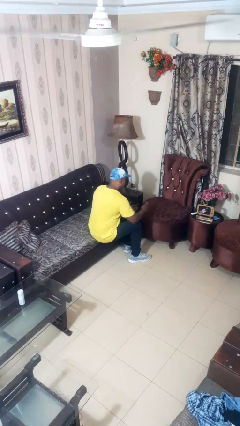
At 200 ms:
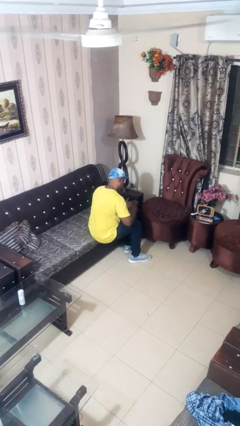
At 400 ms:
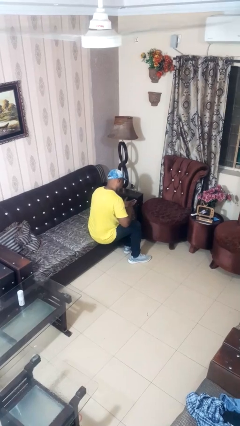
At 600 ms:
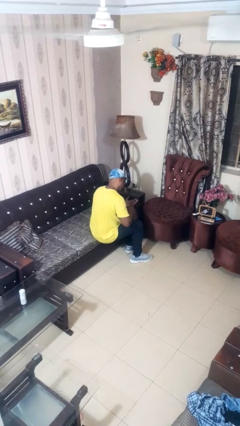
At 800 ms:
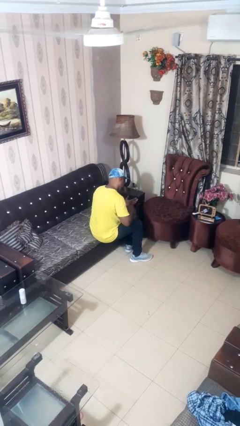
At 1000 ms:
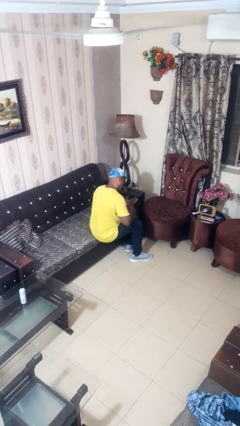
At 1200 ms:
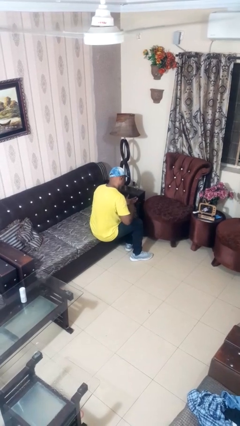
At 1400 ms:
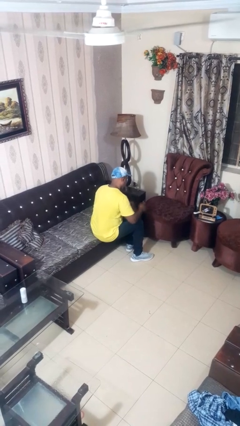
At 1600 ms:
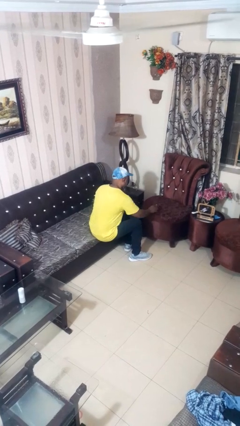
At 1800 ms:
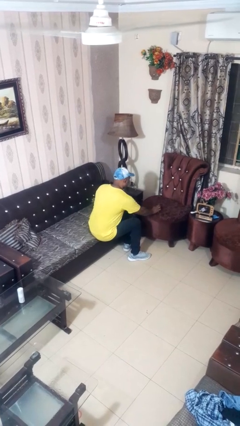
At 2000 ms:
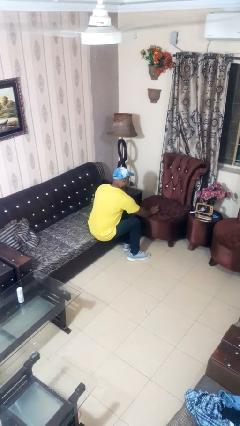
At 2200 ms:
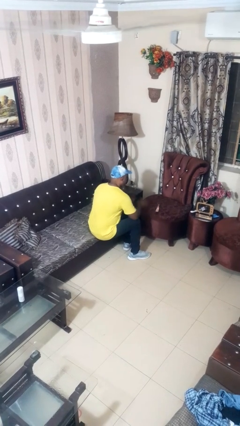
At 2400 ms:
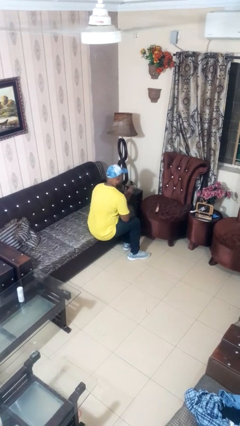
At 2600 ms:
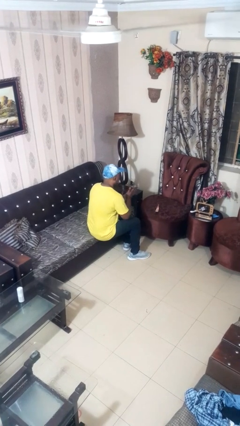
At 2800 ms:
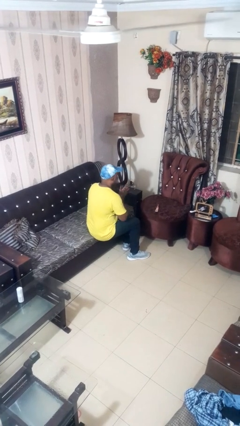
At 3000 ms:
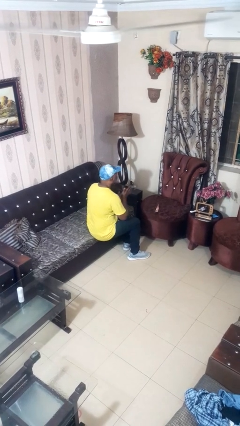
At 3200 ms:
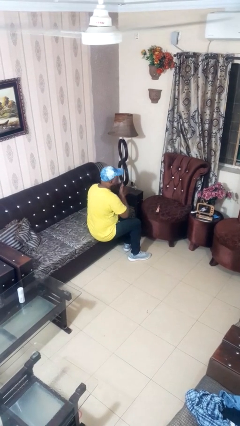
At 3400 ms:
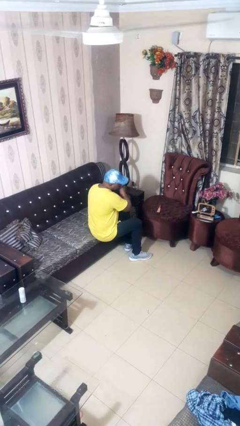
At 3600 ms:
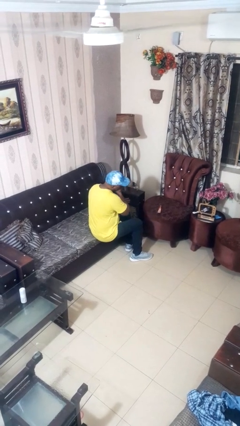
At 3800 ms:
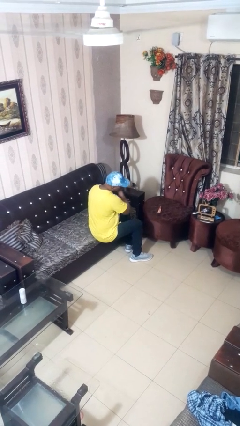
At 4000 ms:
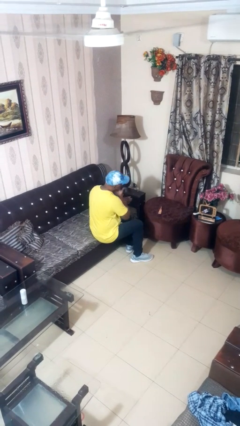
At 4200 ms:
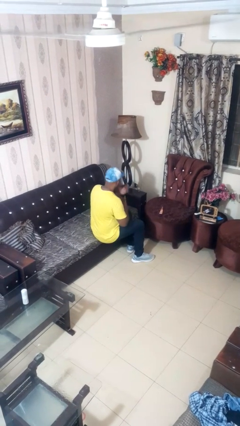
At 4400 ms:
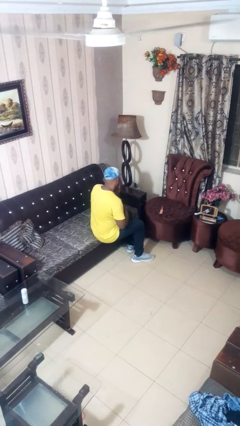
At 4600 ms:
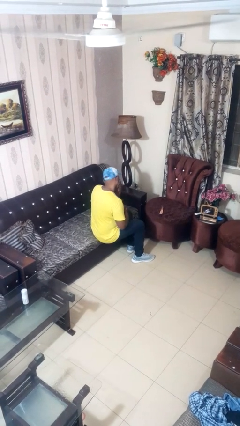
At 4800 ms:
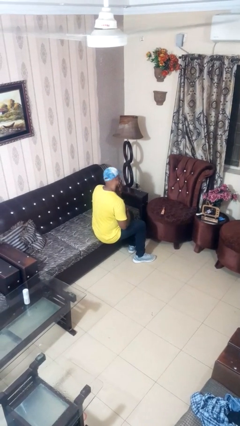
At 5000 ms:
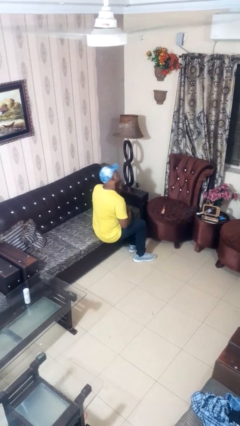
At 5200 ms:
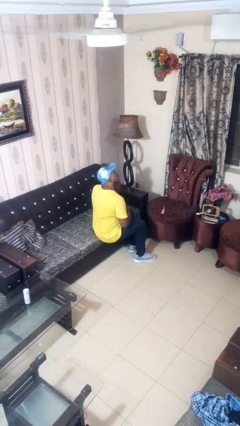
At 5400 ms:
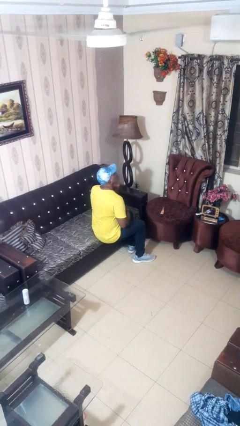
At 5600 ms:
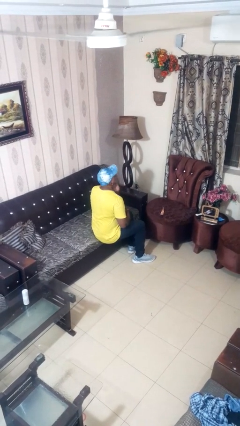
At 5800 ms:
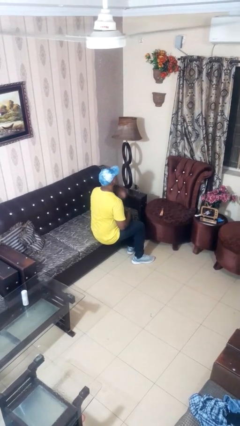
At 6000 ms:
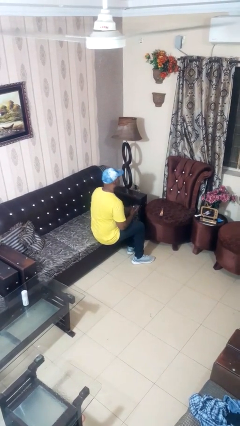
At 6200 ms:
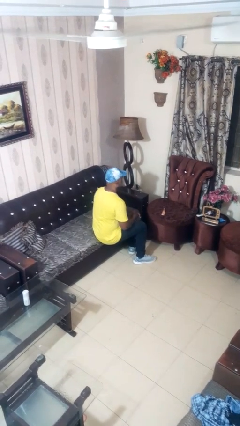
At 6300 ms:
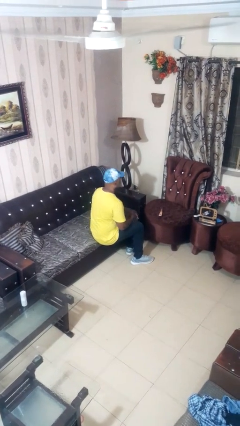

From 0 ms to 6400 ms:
person applies foundation makeup

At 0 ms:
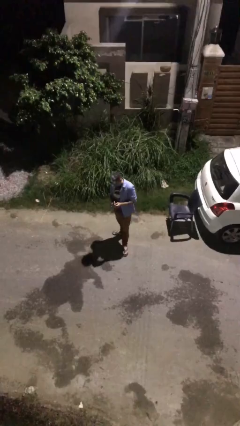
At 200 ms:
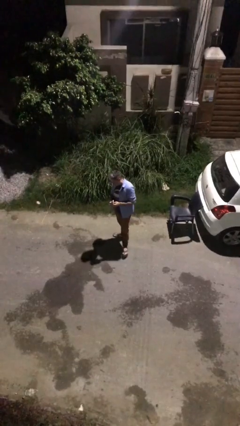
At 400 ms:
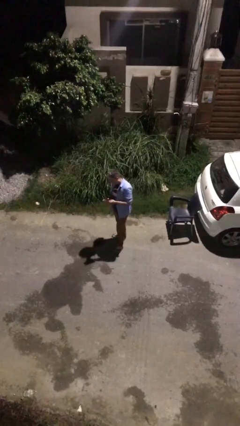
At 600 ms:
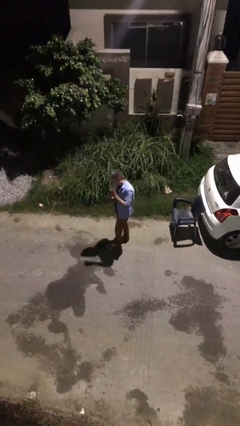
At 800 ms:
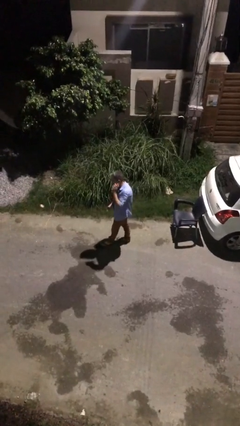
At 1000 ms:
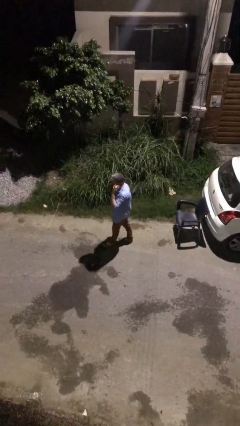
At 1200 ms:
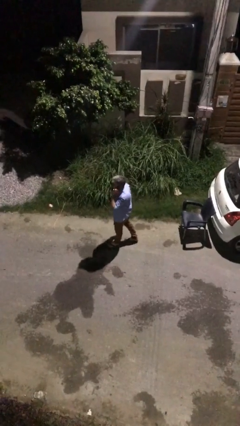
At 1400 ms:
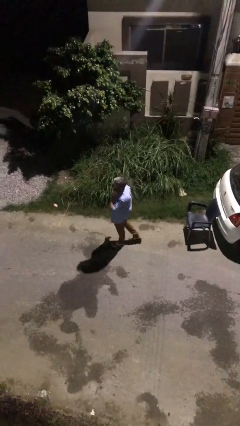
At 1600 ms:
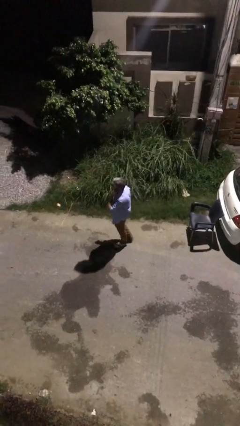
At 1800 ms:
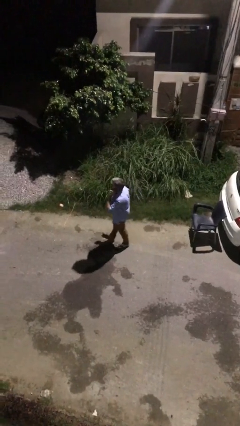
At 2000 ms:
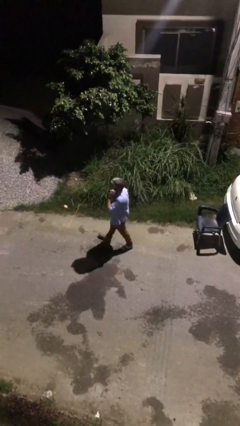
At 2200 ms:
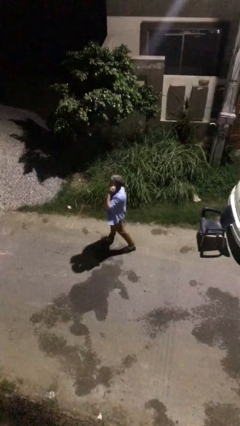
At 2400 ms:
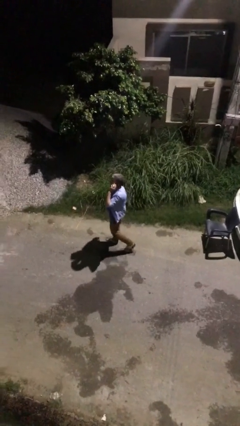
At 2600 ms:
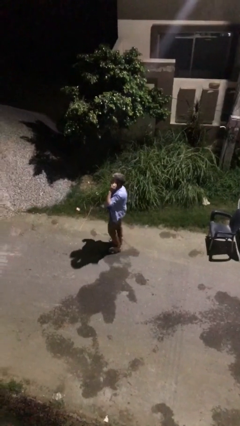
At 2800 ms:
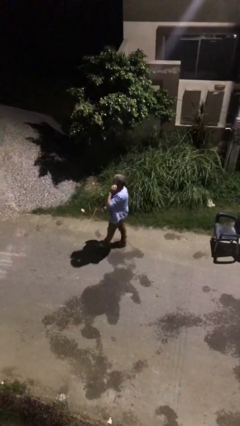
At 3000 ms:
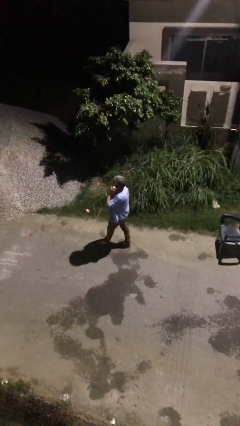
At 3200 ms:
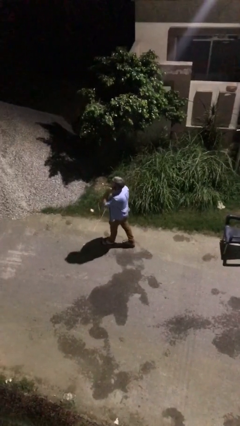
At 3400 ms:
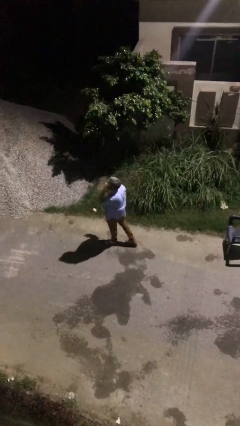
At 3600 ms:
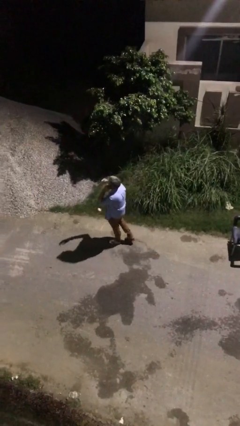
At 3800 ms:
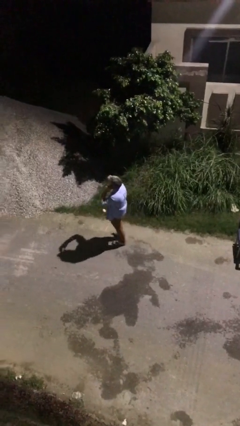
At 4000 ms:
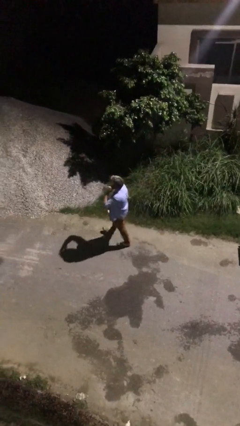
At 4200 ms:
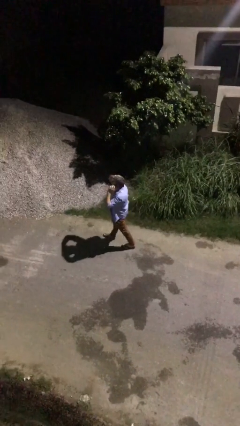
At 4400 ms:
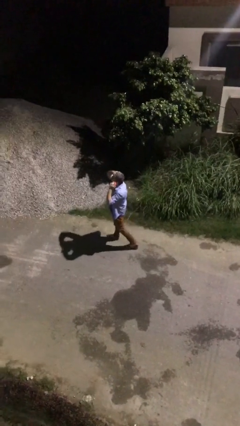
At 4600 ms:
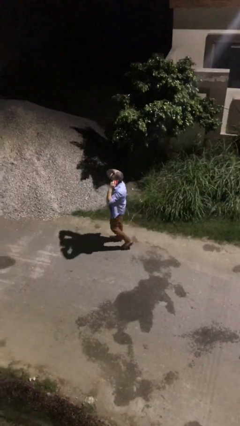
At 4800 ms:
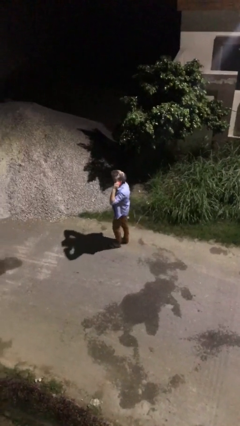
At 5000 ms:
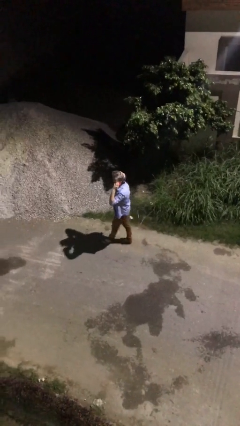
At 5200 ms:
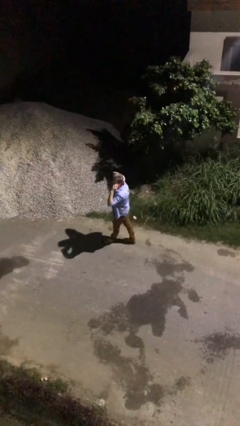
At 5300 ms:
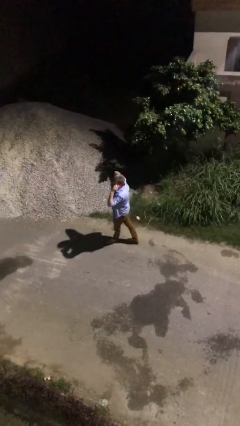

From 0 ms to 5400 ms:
person talks on phone

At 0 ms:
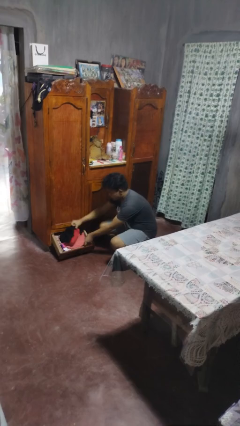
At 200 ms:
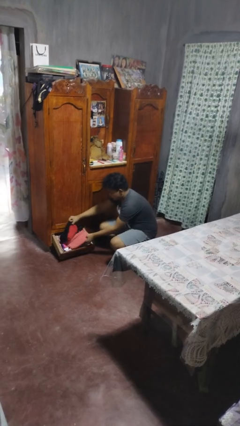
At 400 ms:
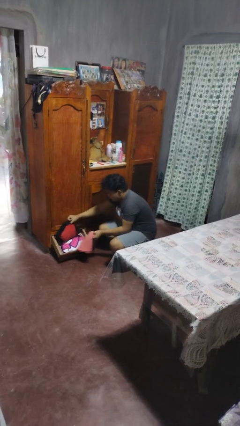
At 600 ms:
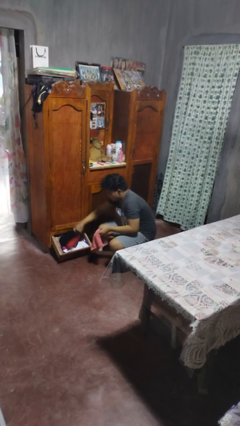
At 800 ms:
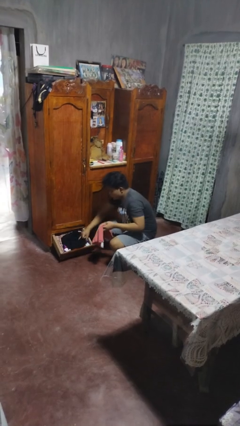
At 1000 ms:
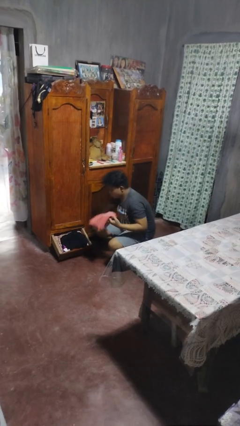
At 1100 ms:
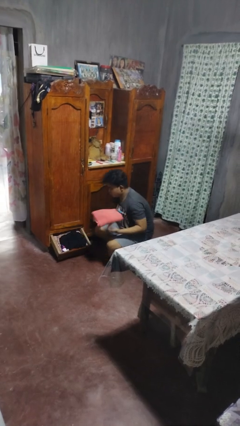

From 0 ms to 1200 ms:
person takes clothes from dresser

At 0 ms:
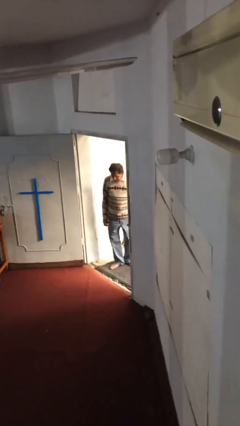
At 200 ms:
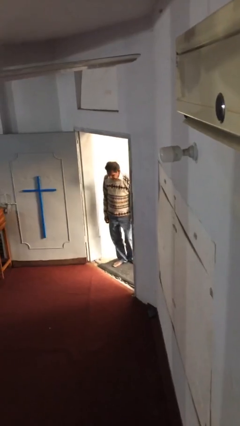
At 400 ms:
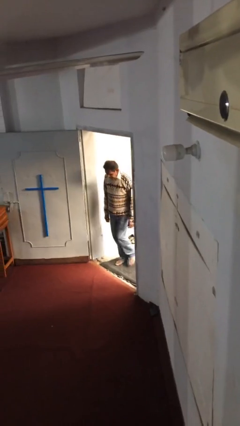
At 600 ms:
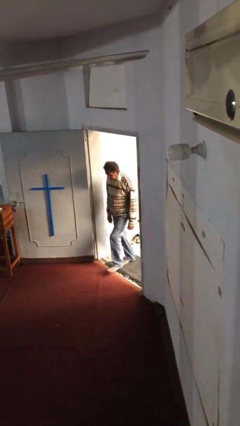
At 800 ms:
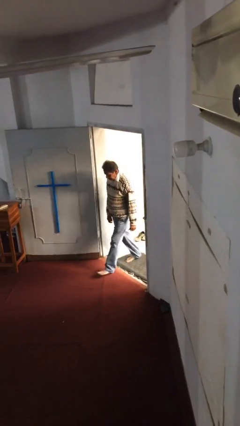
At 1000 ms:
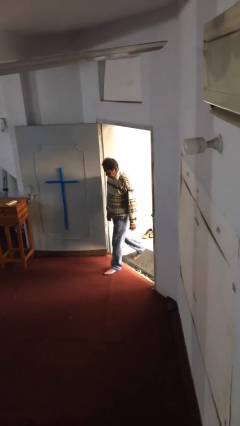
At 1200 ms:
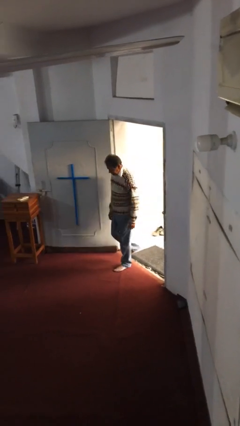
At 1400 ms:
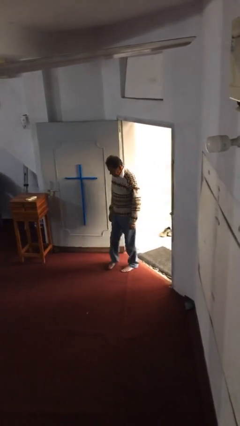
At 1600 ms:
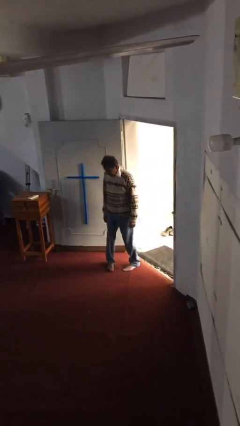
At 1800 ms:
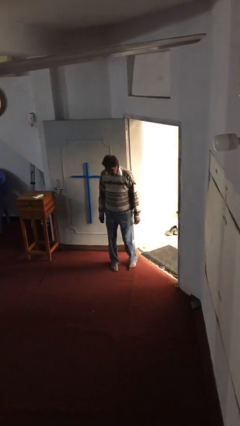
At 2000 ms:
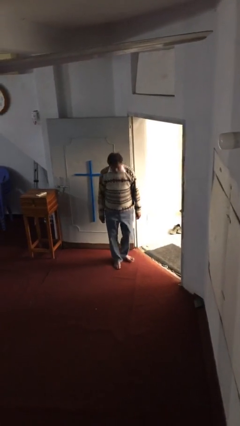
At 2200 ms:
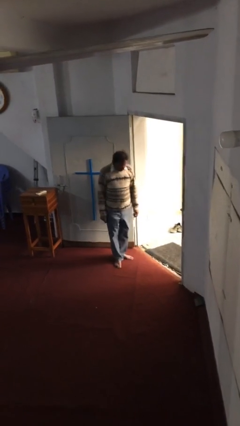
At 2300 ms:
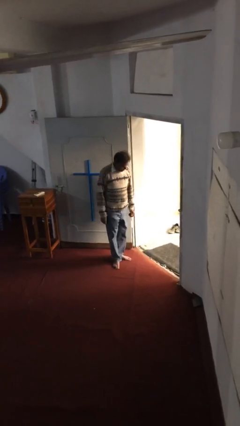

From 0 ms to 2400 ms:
person enters scene through structure

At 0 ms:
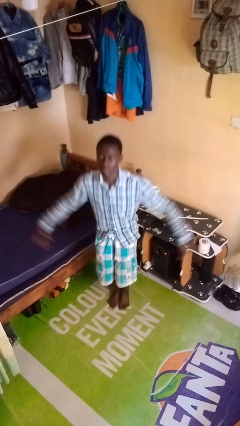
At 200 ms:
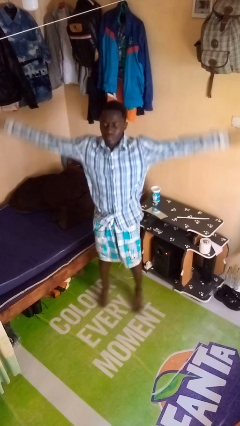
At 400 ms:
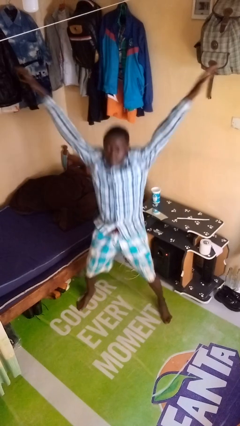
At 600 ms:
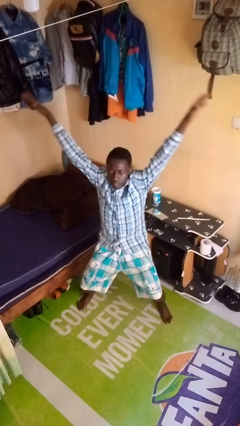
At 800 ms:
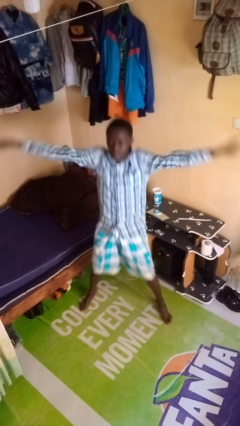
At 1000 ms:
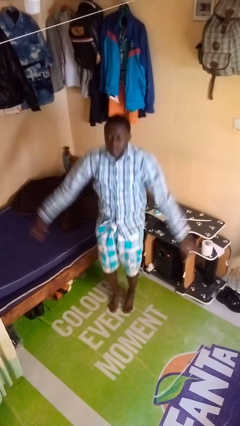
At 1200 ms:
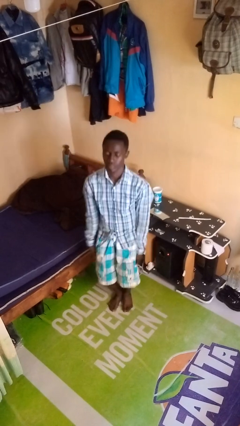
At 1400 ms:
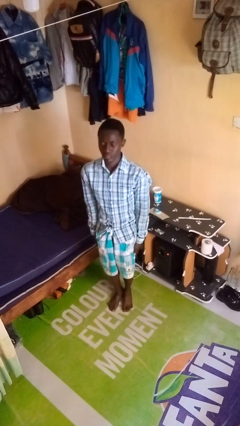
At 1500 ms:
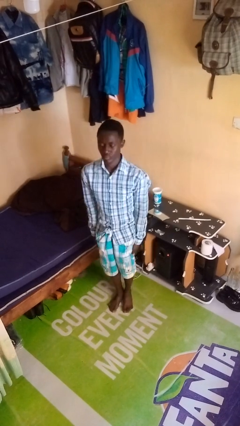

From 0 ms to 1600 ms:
person exercises with jumping jacks

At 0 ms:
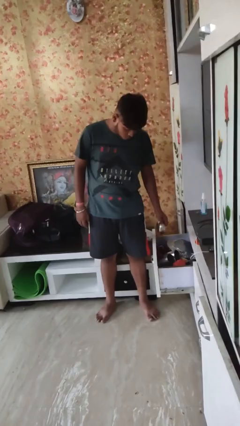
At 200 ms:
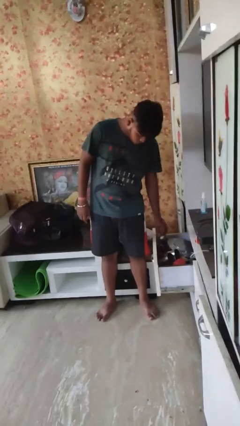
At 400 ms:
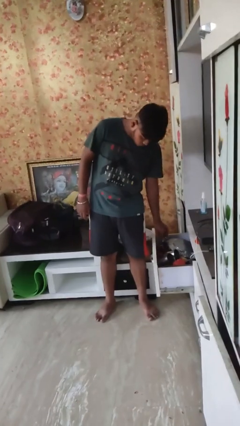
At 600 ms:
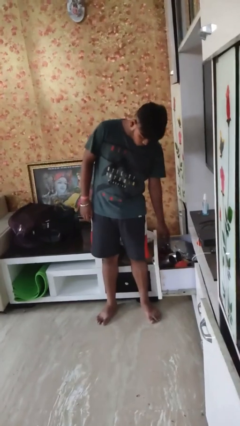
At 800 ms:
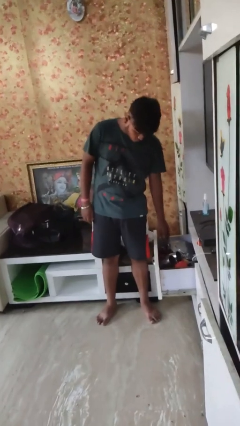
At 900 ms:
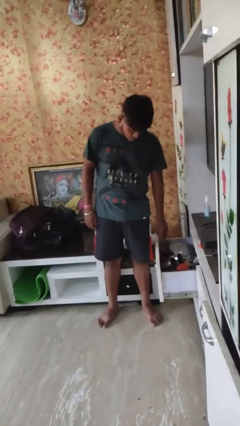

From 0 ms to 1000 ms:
person puts object into kitchen drawer
